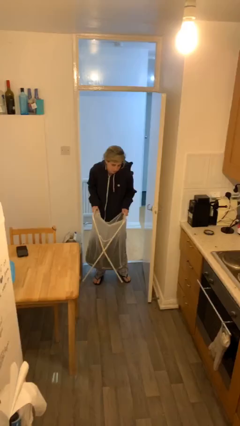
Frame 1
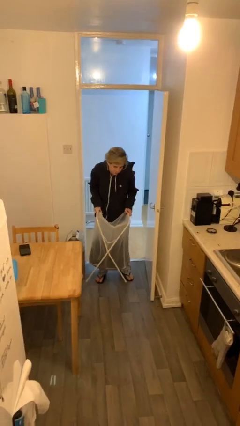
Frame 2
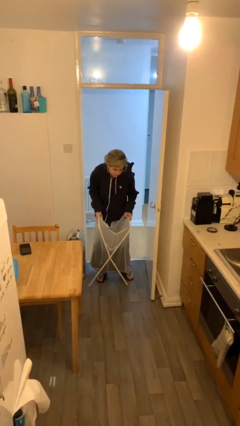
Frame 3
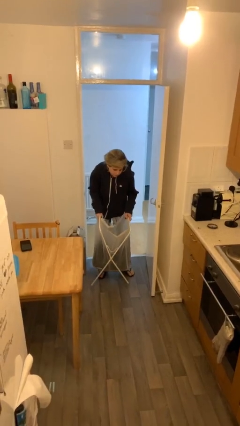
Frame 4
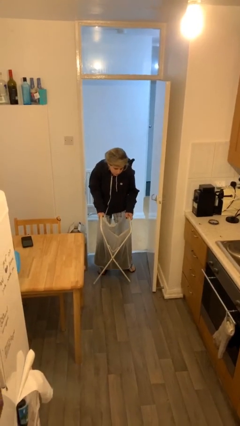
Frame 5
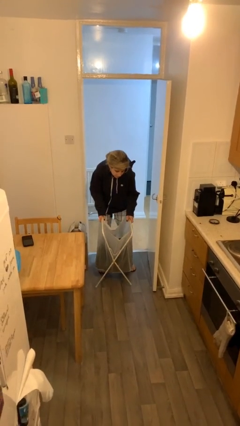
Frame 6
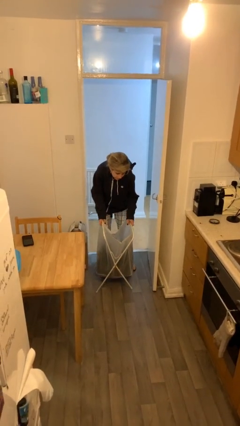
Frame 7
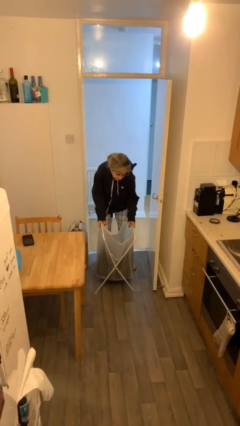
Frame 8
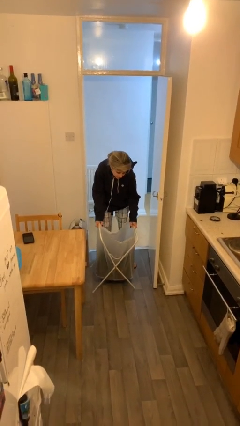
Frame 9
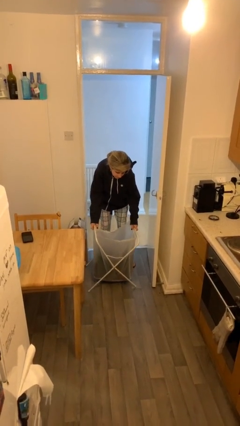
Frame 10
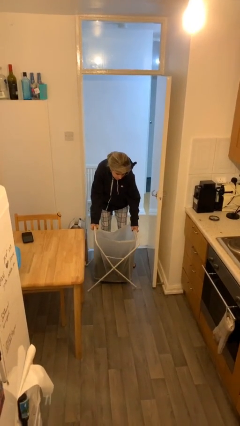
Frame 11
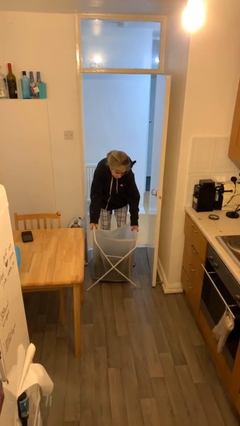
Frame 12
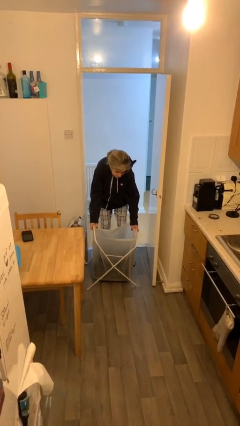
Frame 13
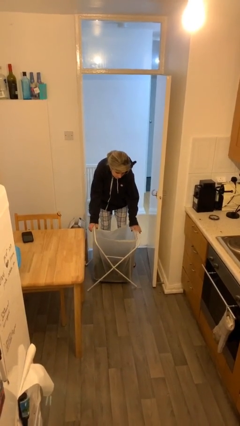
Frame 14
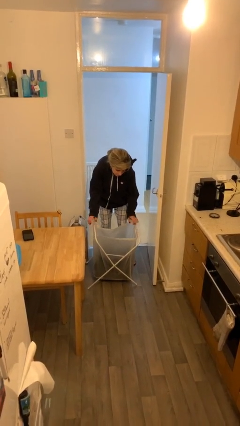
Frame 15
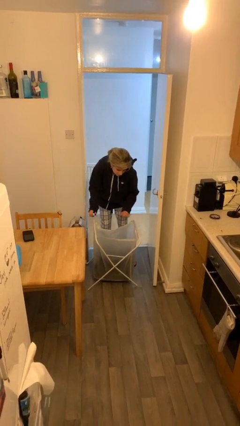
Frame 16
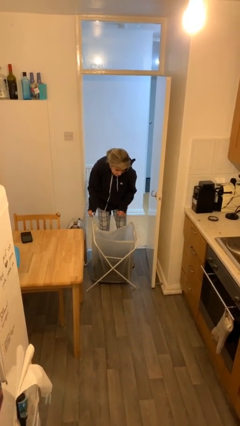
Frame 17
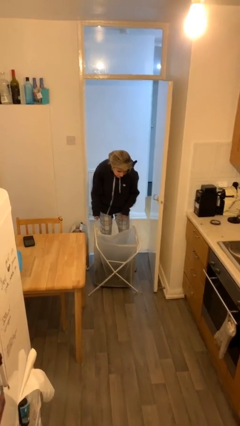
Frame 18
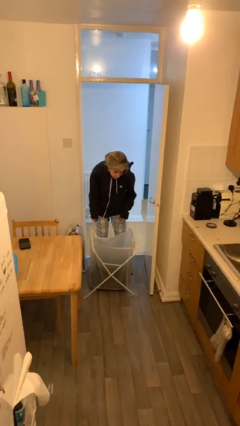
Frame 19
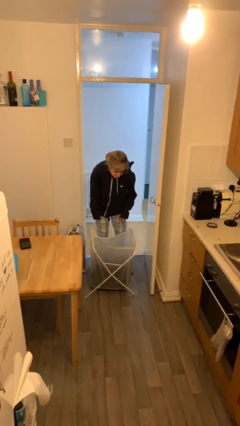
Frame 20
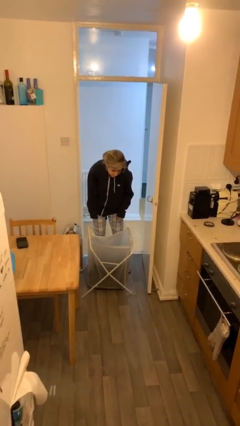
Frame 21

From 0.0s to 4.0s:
person puts down object on floor

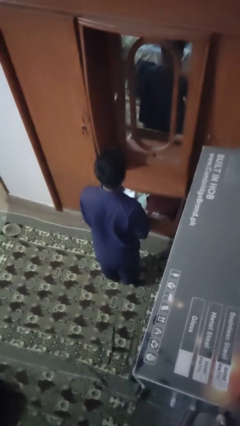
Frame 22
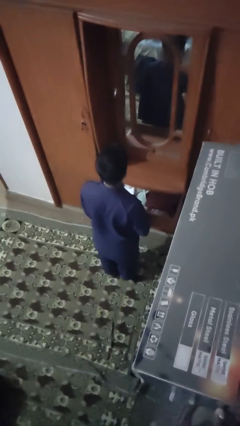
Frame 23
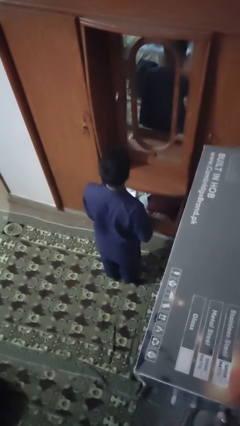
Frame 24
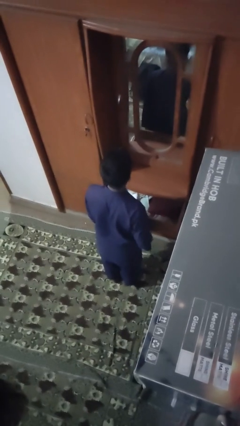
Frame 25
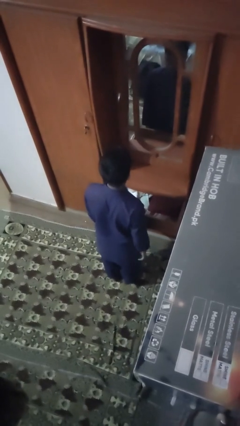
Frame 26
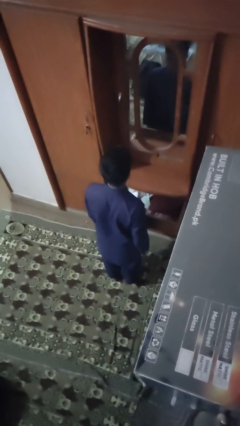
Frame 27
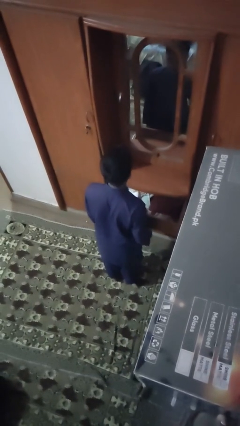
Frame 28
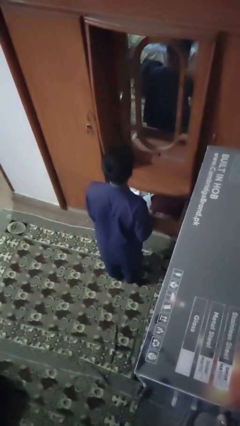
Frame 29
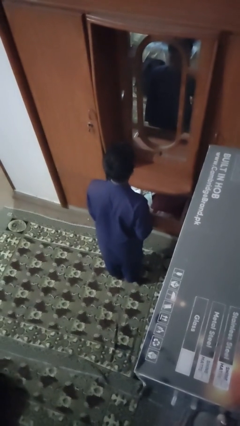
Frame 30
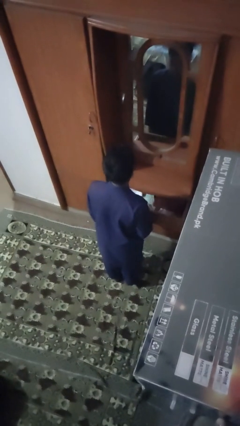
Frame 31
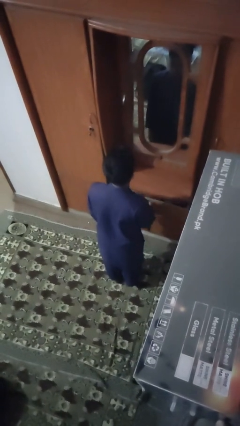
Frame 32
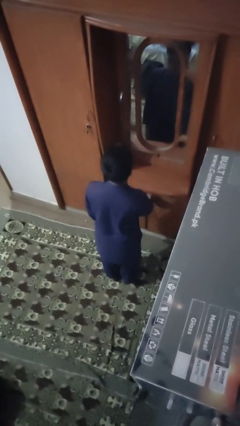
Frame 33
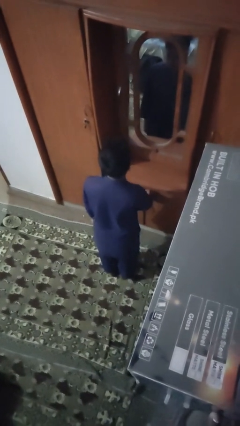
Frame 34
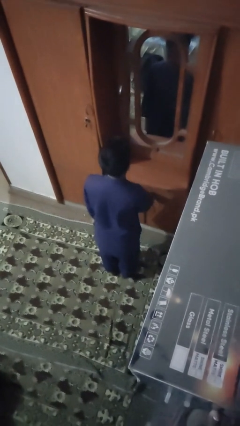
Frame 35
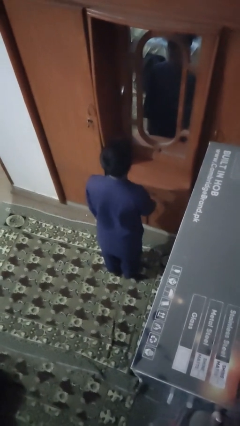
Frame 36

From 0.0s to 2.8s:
person closes dresser drawer

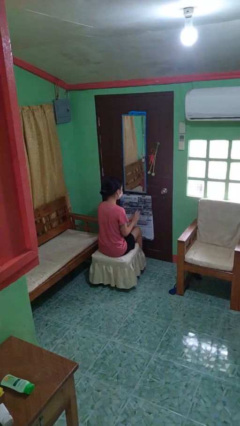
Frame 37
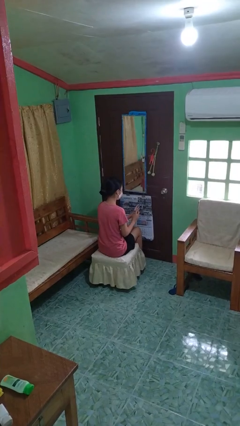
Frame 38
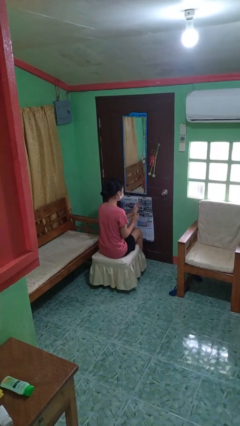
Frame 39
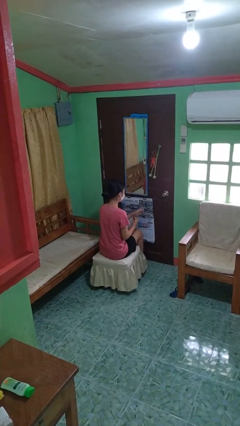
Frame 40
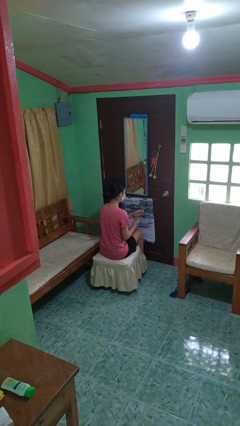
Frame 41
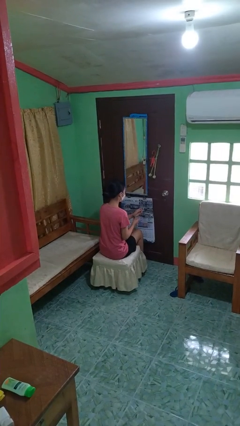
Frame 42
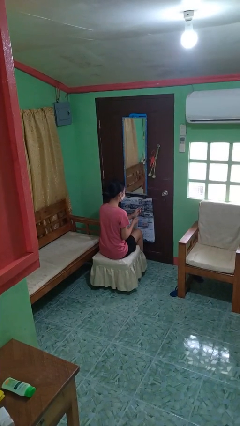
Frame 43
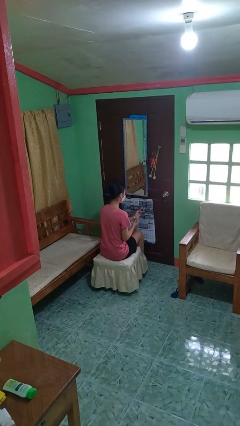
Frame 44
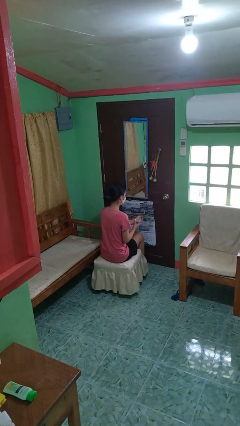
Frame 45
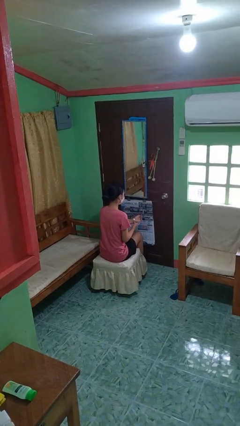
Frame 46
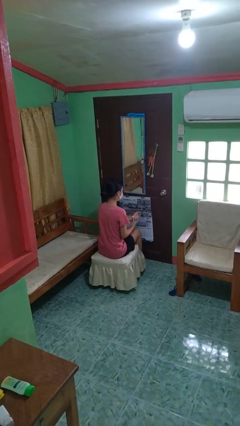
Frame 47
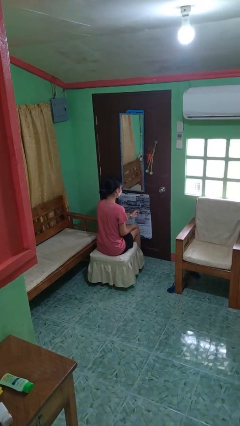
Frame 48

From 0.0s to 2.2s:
person puts on wristwatch

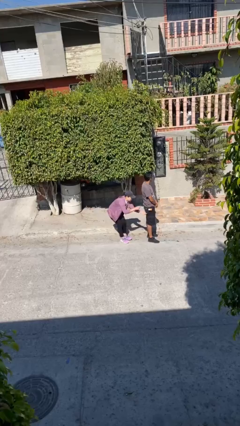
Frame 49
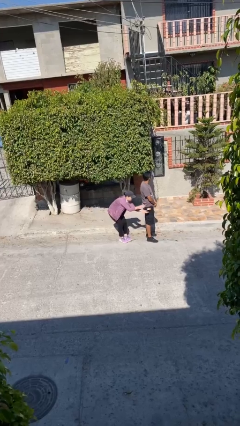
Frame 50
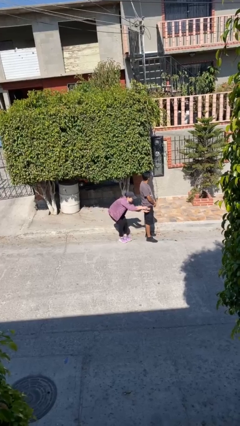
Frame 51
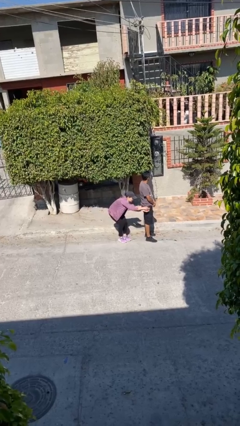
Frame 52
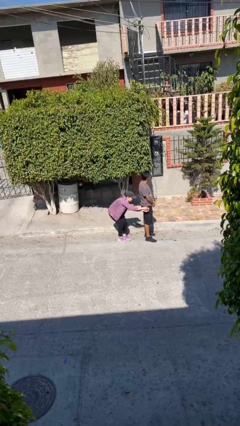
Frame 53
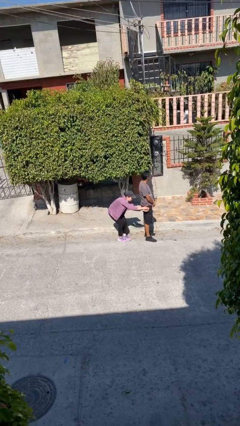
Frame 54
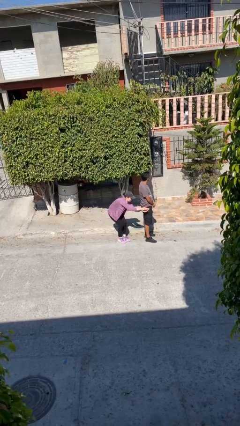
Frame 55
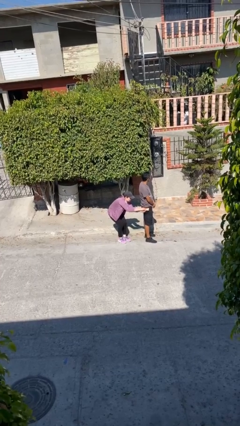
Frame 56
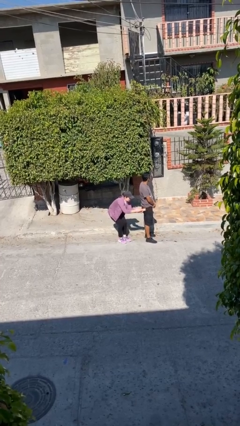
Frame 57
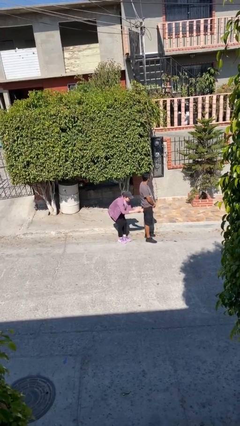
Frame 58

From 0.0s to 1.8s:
person steals object from person

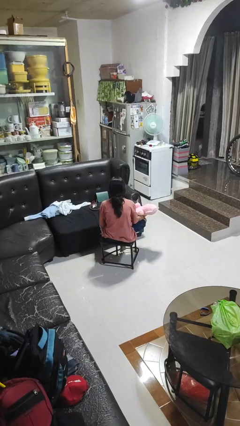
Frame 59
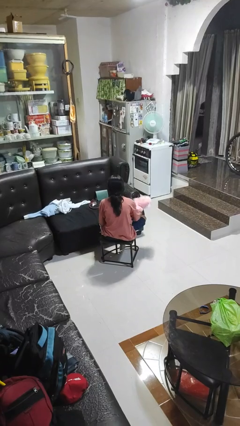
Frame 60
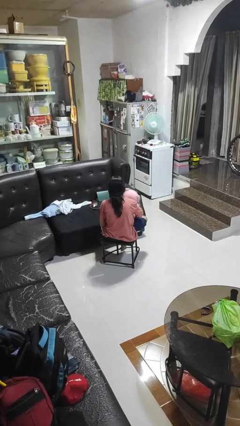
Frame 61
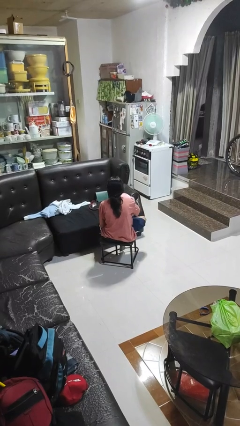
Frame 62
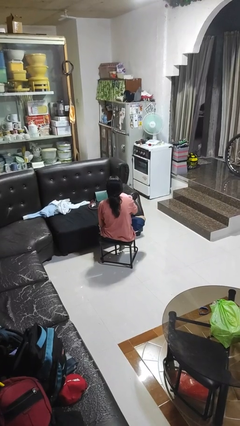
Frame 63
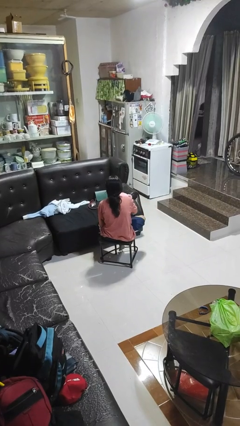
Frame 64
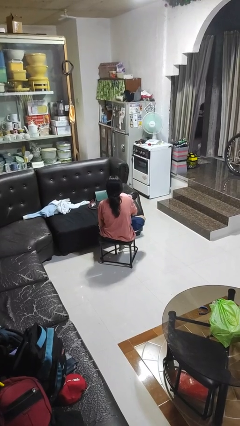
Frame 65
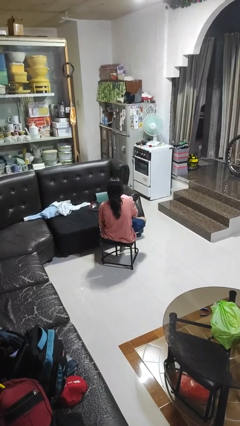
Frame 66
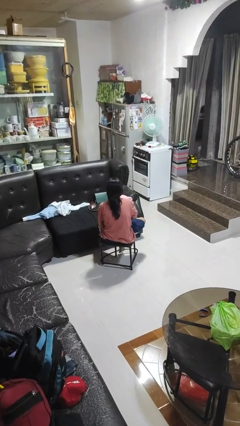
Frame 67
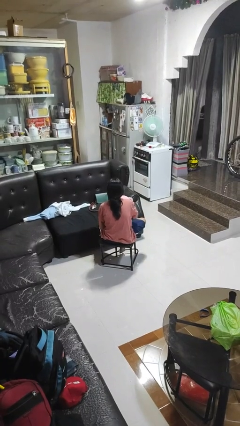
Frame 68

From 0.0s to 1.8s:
person hugs stuffed animal

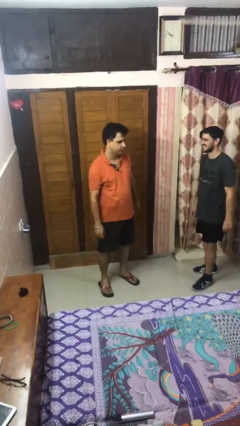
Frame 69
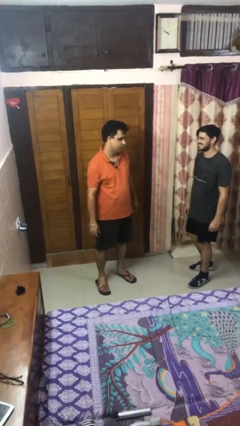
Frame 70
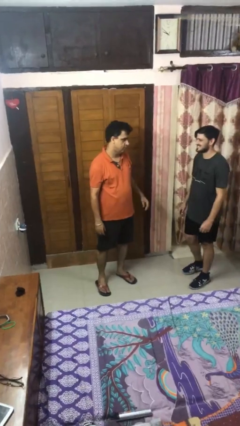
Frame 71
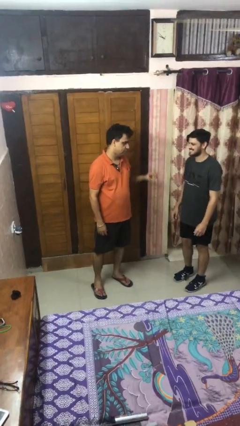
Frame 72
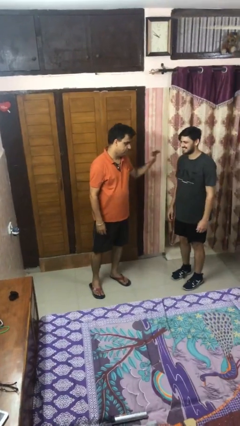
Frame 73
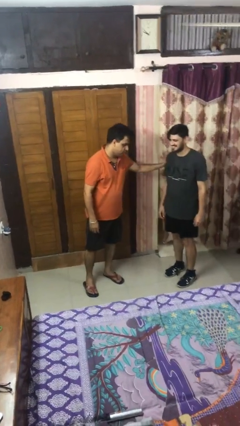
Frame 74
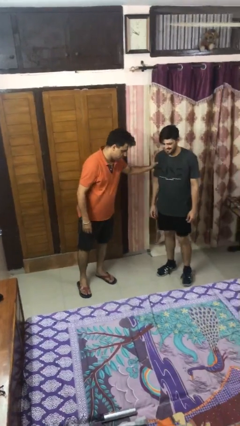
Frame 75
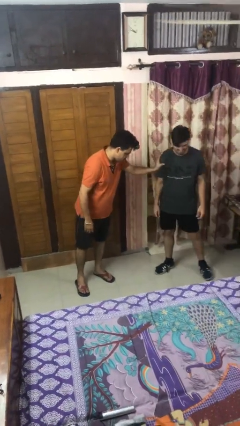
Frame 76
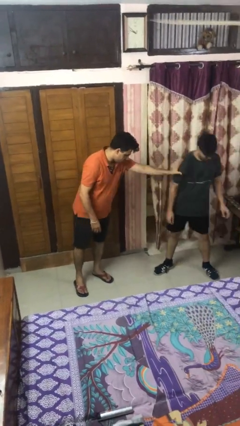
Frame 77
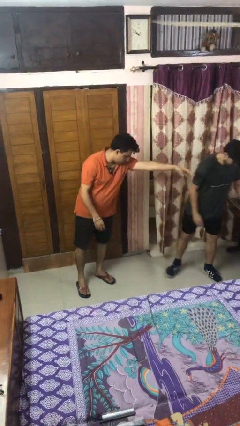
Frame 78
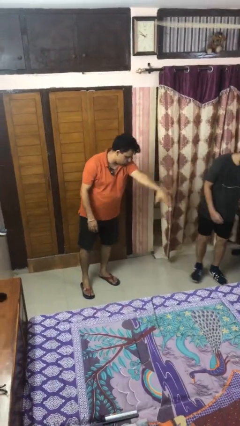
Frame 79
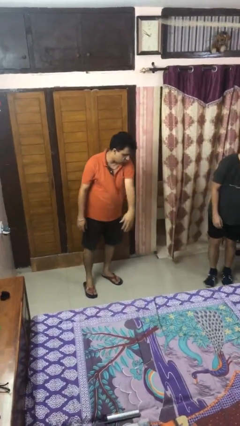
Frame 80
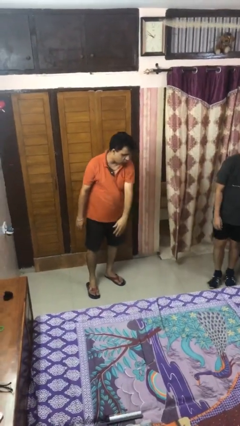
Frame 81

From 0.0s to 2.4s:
person shoves person

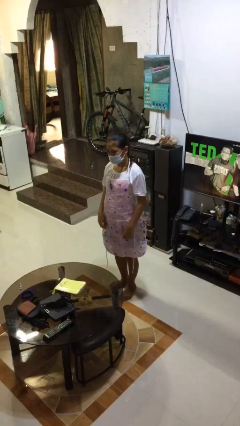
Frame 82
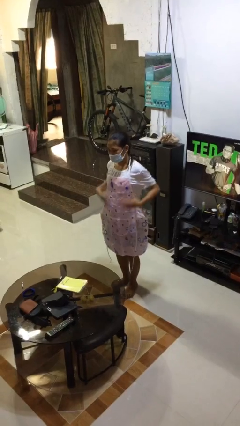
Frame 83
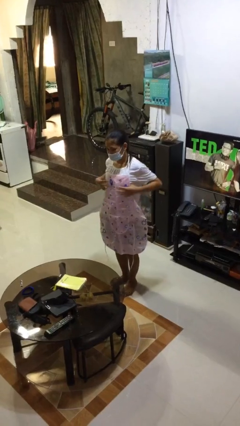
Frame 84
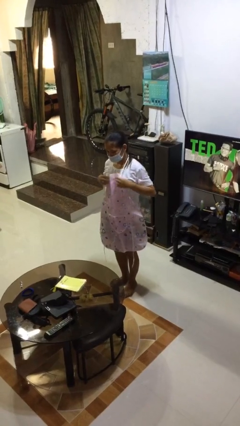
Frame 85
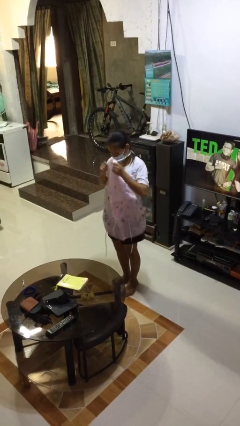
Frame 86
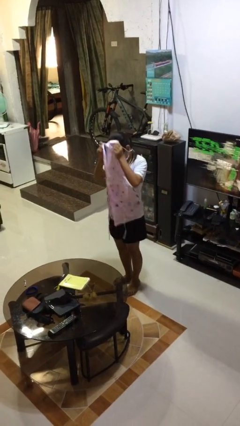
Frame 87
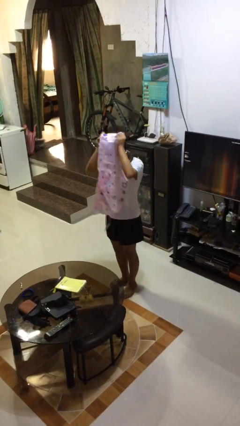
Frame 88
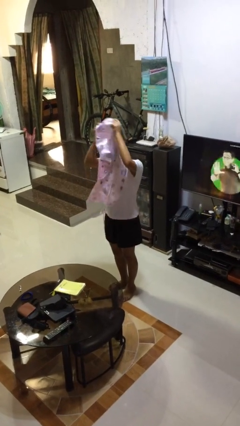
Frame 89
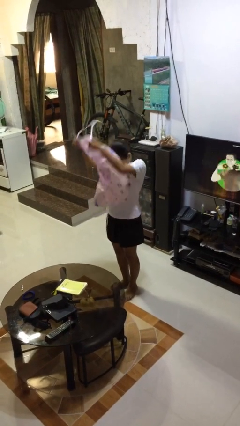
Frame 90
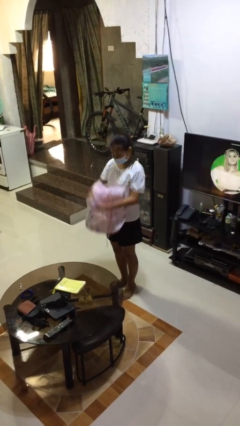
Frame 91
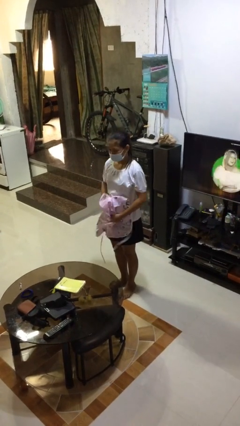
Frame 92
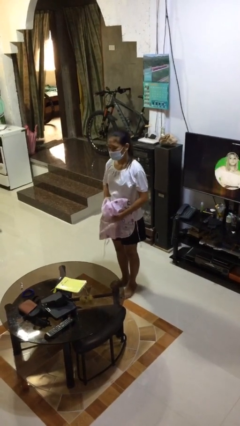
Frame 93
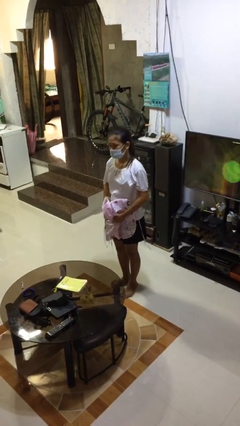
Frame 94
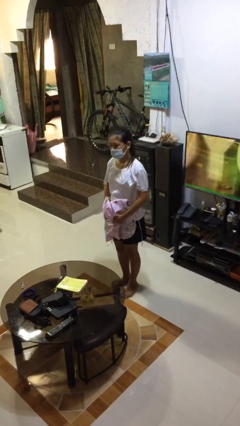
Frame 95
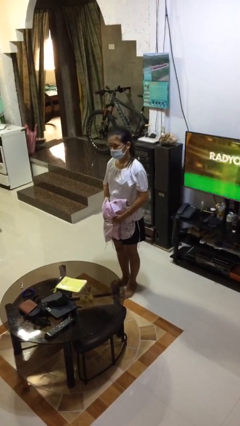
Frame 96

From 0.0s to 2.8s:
person takes off apron
